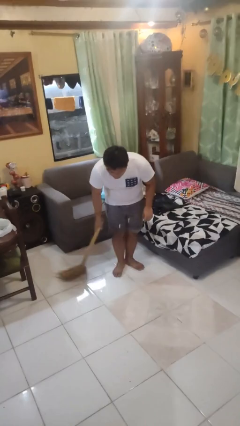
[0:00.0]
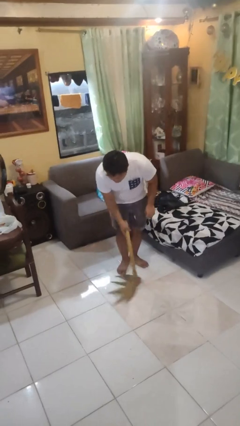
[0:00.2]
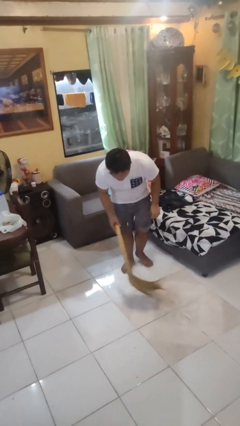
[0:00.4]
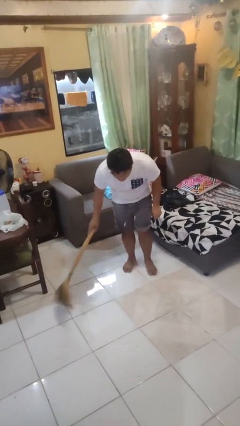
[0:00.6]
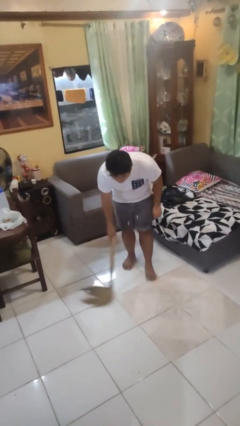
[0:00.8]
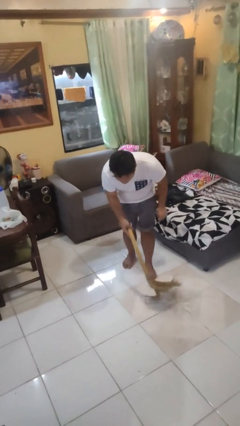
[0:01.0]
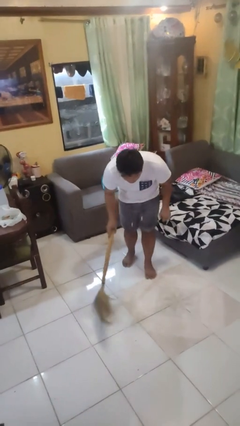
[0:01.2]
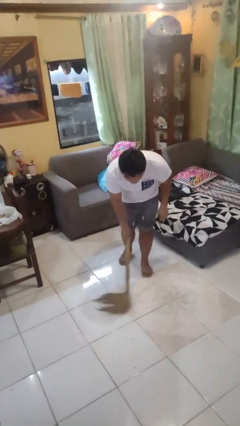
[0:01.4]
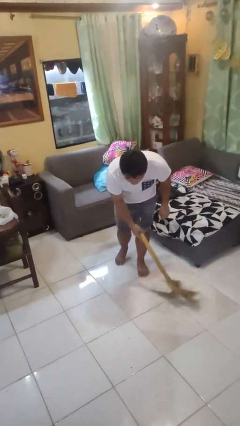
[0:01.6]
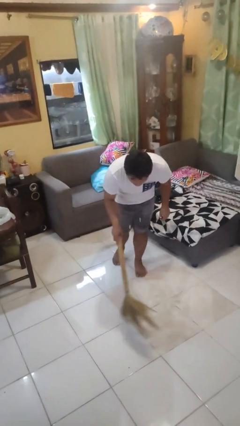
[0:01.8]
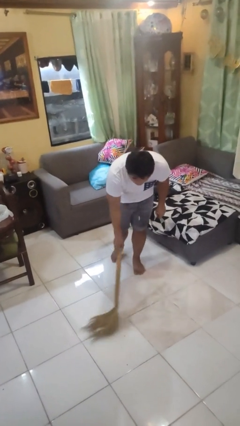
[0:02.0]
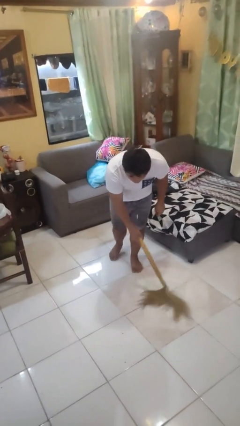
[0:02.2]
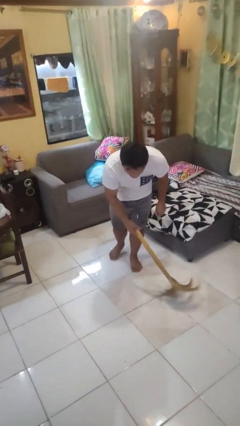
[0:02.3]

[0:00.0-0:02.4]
person sweeps floor

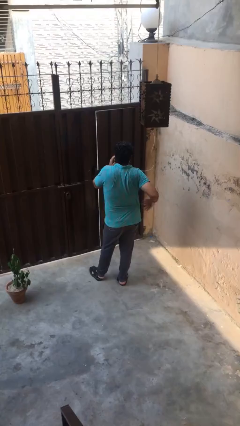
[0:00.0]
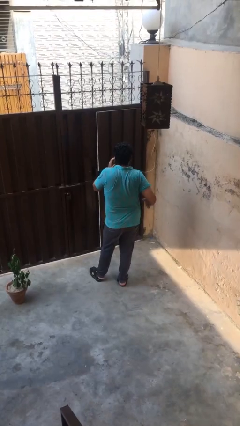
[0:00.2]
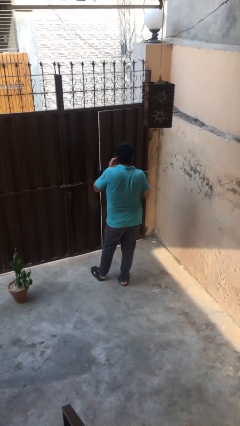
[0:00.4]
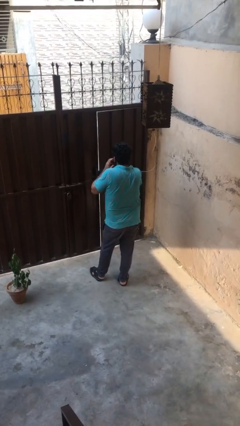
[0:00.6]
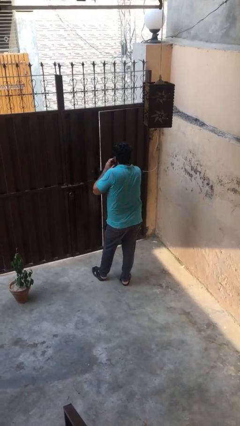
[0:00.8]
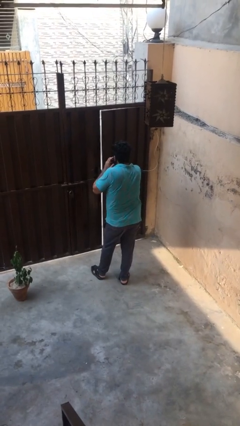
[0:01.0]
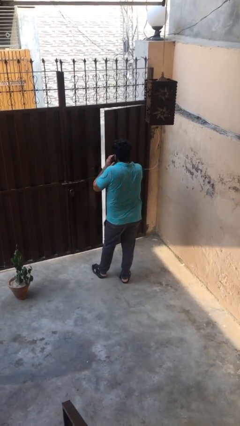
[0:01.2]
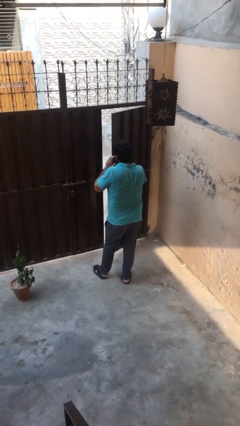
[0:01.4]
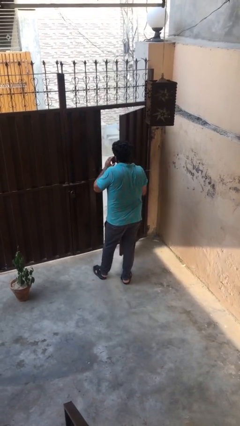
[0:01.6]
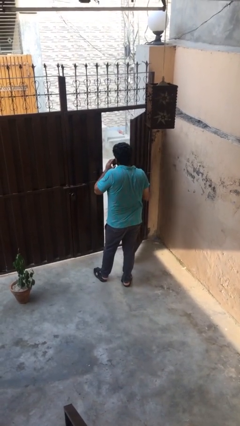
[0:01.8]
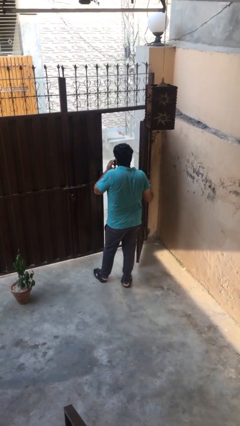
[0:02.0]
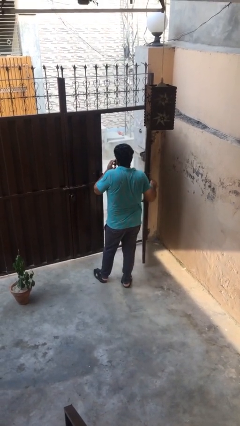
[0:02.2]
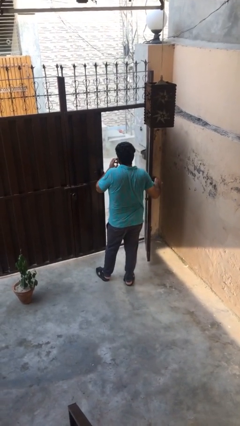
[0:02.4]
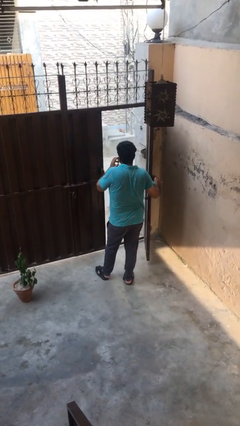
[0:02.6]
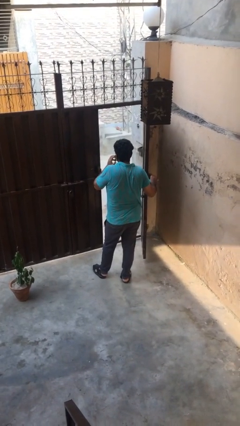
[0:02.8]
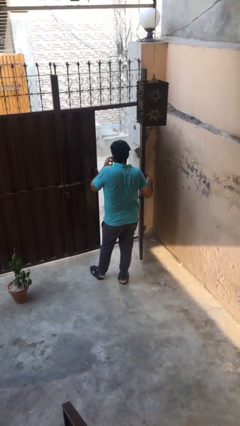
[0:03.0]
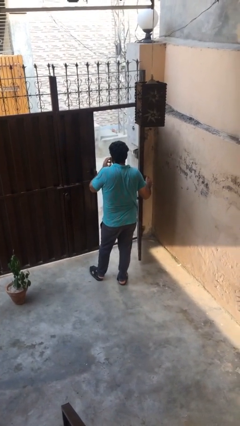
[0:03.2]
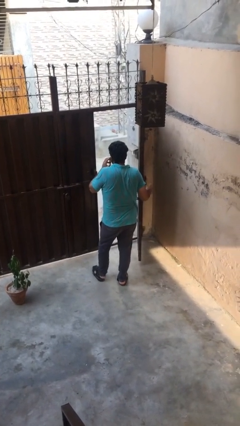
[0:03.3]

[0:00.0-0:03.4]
person opens facility door

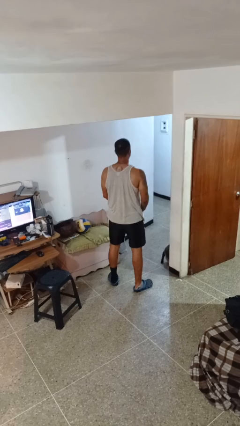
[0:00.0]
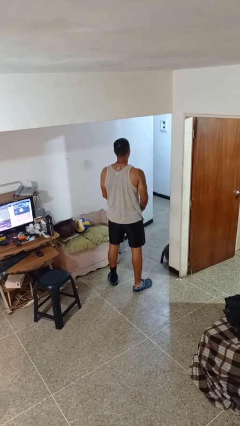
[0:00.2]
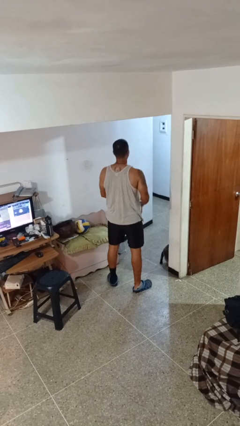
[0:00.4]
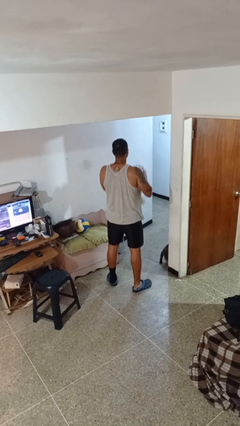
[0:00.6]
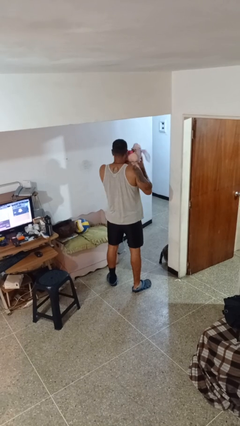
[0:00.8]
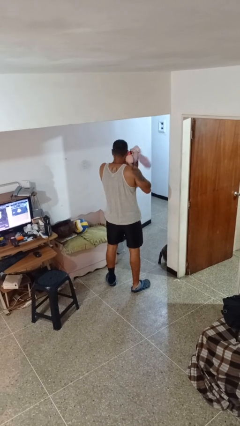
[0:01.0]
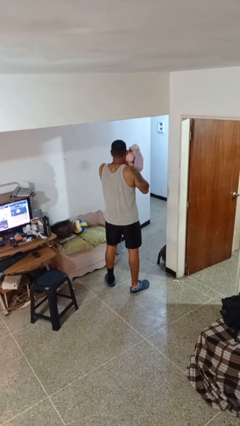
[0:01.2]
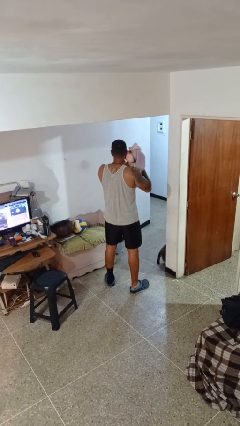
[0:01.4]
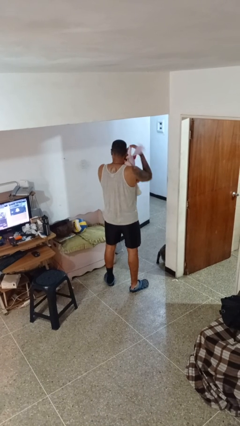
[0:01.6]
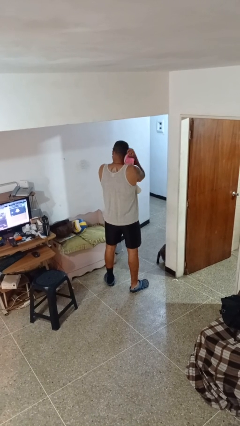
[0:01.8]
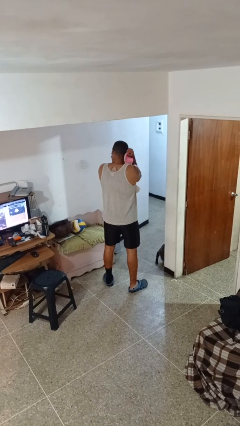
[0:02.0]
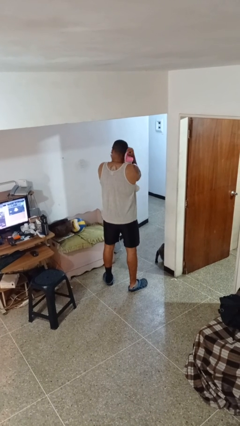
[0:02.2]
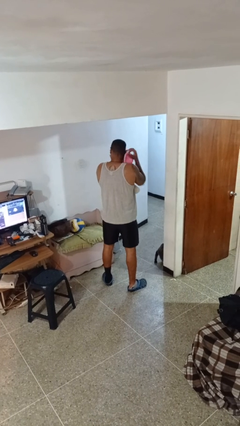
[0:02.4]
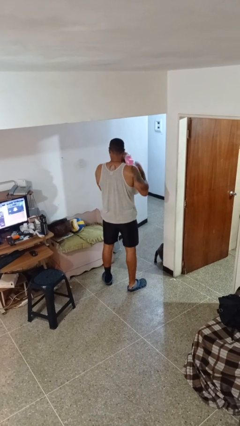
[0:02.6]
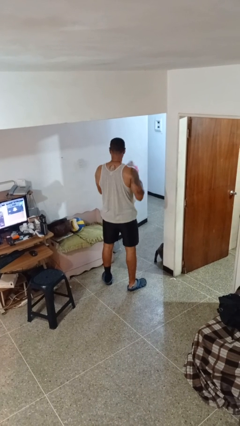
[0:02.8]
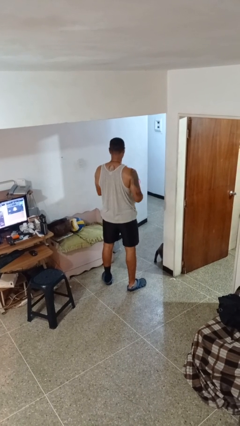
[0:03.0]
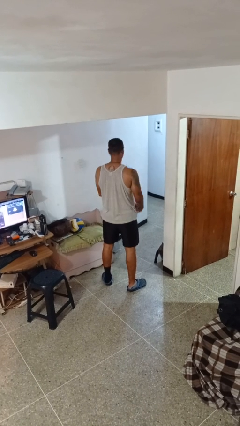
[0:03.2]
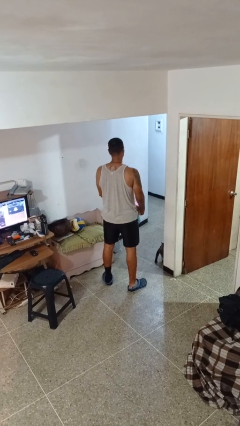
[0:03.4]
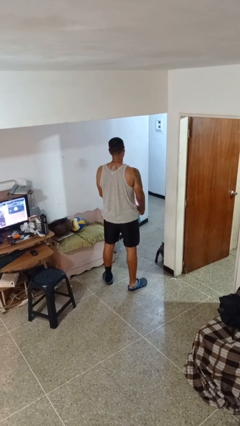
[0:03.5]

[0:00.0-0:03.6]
person squeezes object

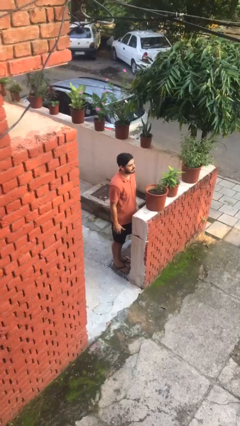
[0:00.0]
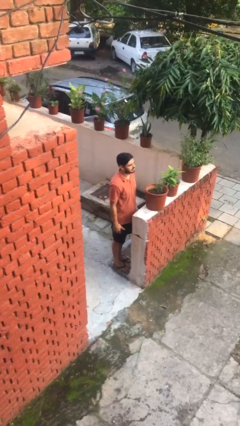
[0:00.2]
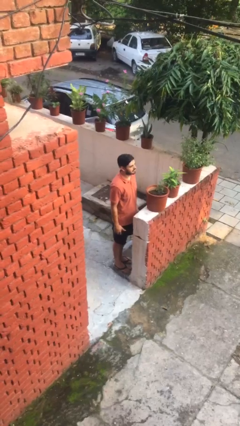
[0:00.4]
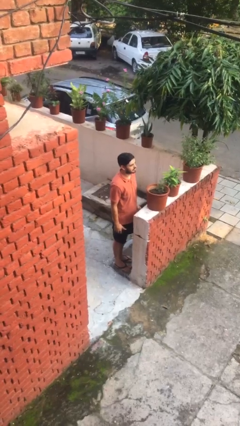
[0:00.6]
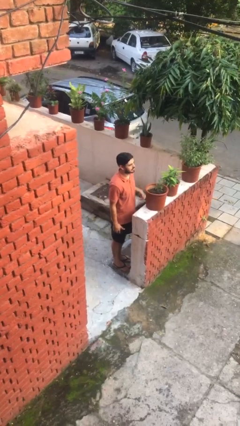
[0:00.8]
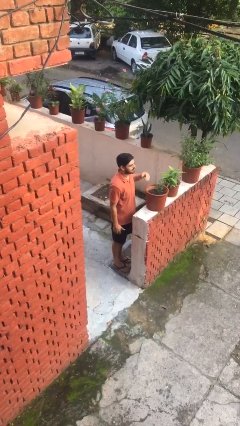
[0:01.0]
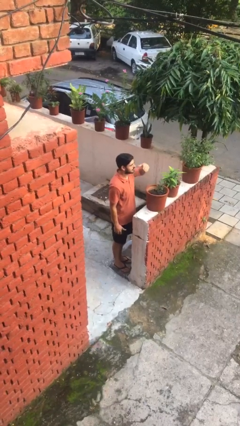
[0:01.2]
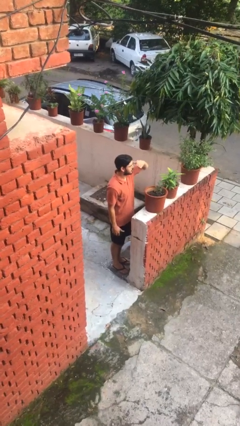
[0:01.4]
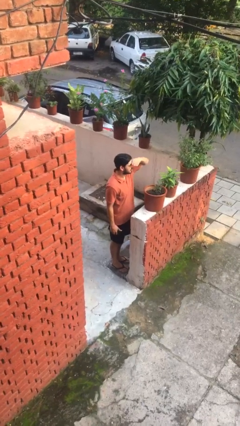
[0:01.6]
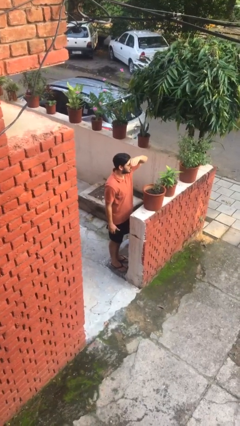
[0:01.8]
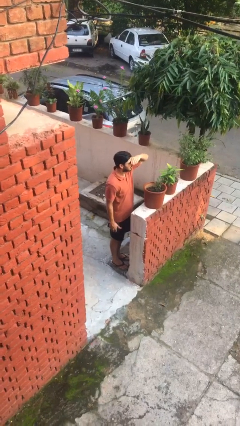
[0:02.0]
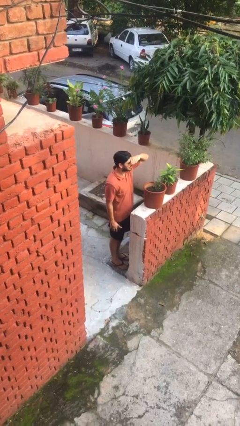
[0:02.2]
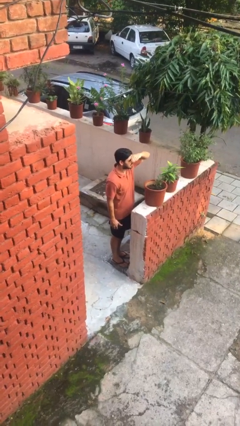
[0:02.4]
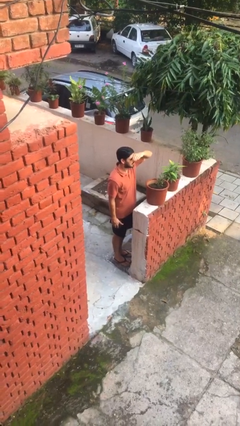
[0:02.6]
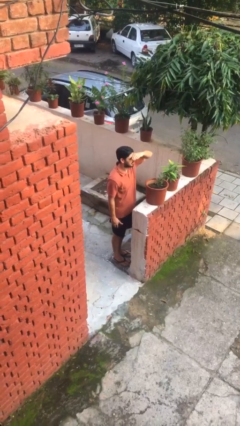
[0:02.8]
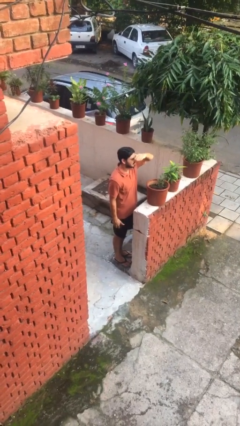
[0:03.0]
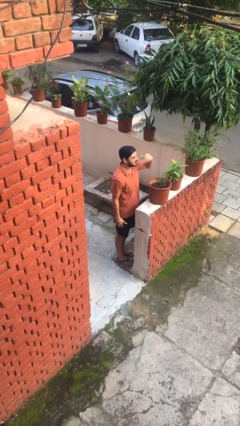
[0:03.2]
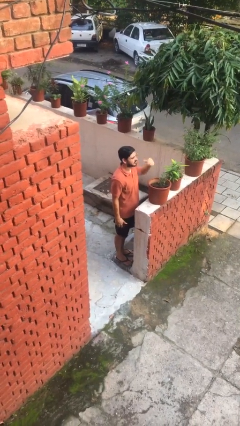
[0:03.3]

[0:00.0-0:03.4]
person shades eyes

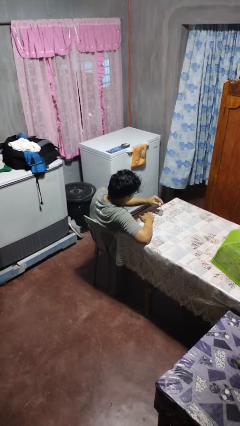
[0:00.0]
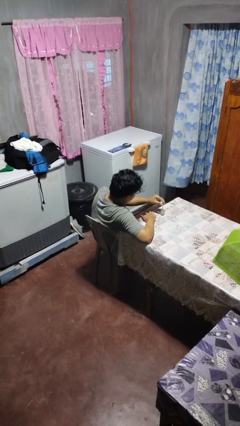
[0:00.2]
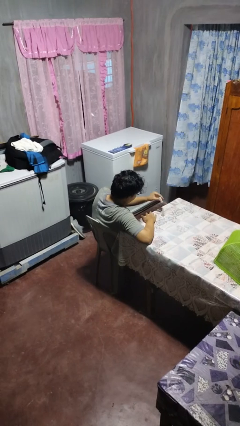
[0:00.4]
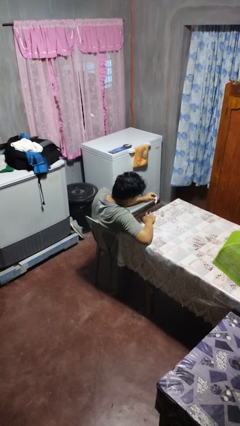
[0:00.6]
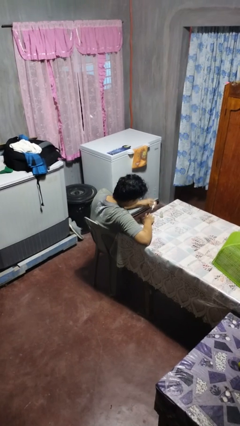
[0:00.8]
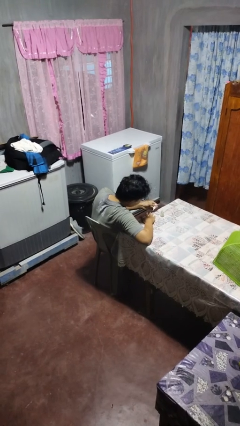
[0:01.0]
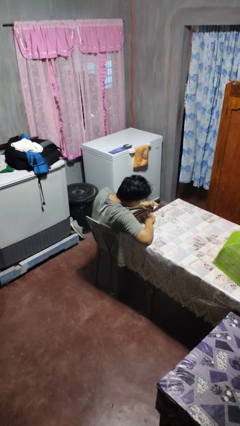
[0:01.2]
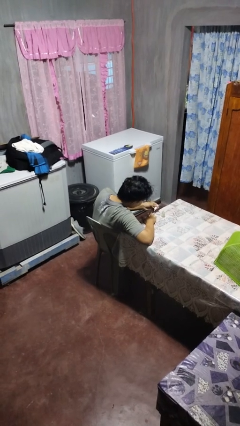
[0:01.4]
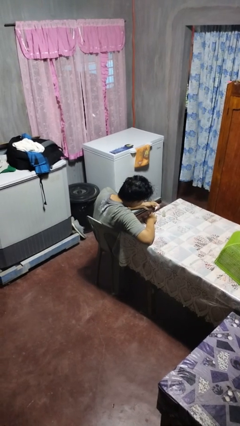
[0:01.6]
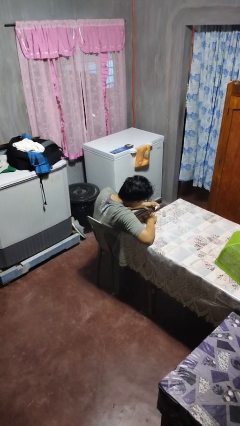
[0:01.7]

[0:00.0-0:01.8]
person paints fingernails

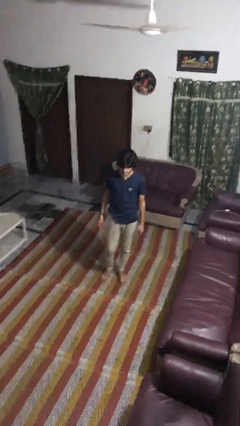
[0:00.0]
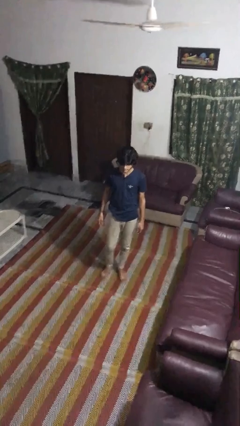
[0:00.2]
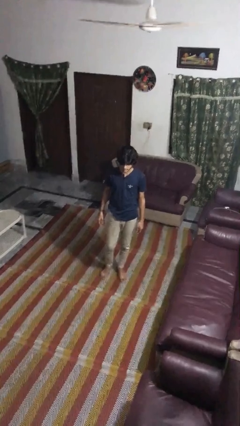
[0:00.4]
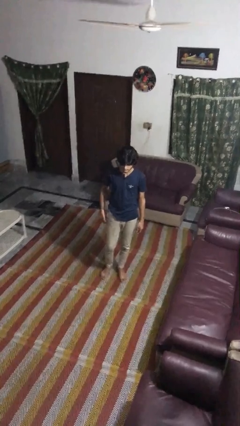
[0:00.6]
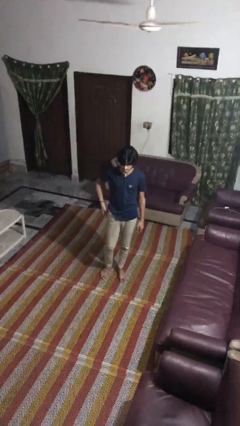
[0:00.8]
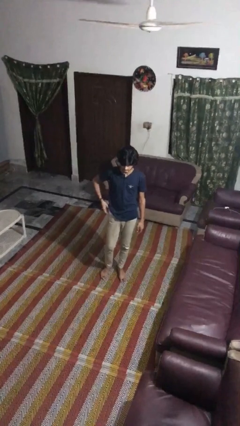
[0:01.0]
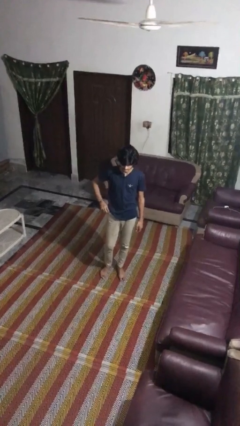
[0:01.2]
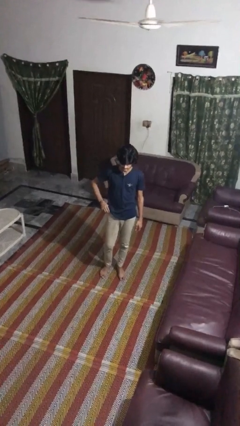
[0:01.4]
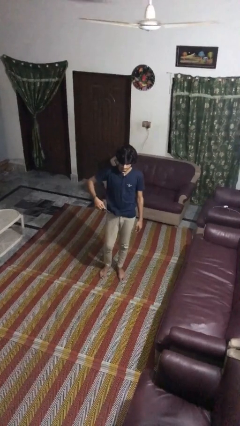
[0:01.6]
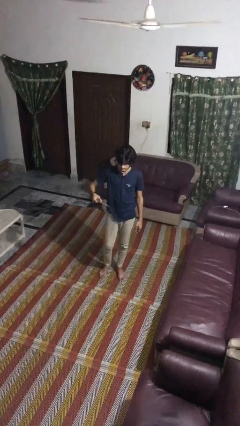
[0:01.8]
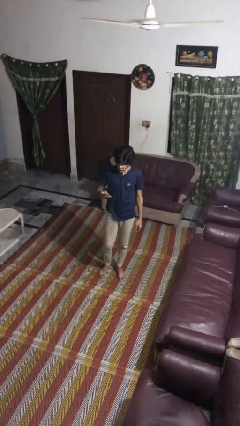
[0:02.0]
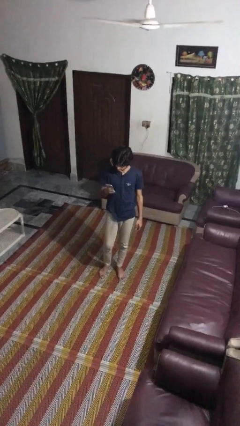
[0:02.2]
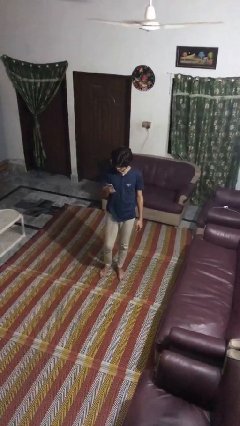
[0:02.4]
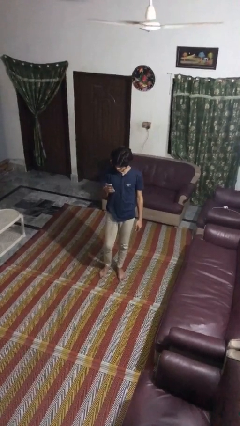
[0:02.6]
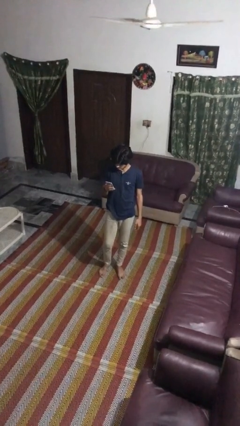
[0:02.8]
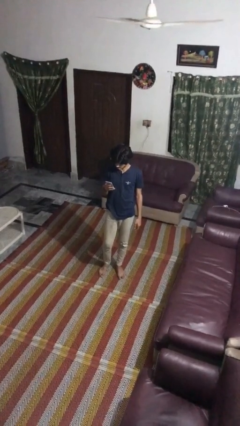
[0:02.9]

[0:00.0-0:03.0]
person takes phone from pocket
